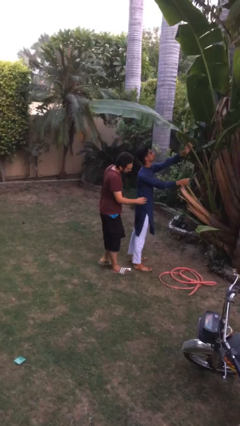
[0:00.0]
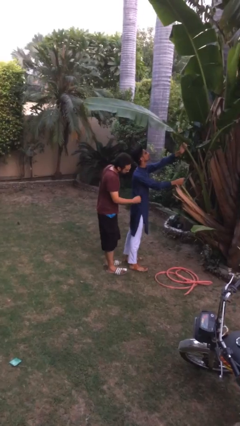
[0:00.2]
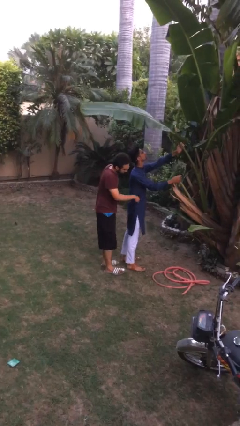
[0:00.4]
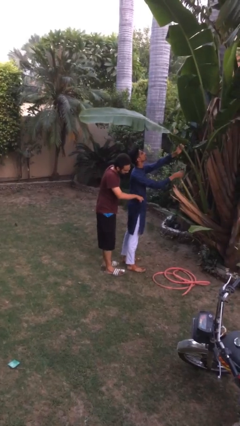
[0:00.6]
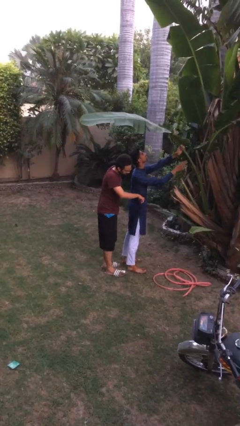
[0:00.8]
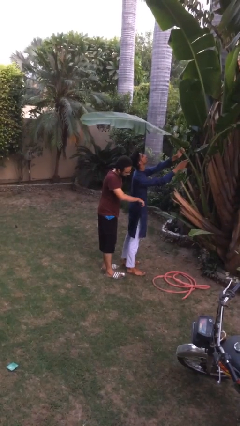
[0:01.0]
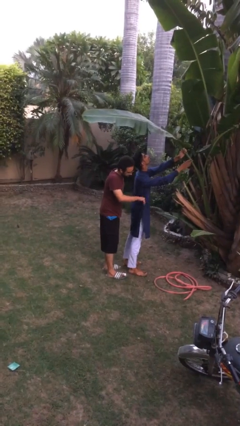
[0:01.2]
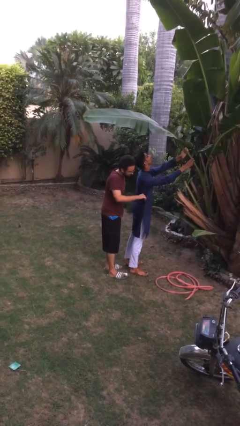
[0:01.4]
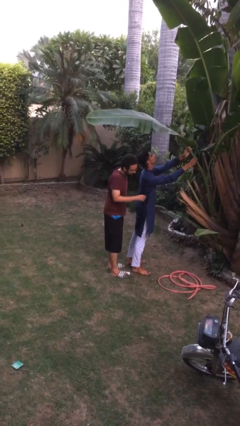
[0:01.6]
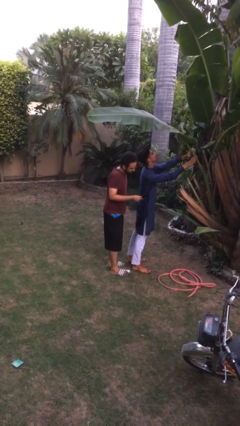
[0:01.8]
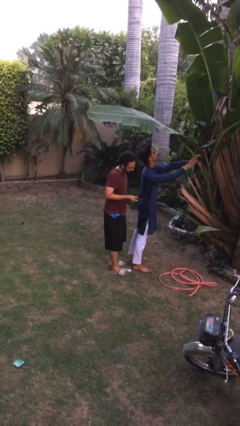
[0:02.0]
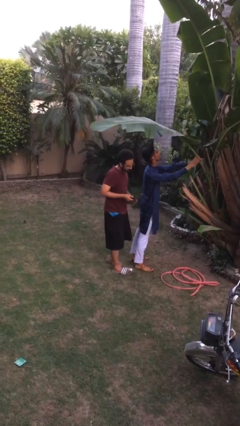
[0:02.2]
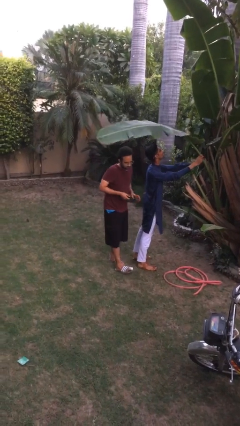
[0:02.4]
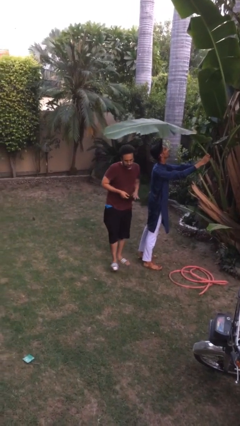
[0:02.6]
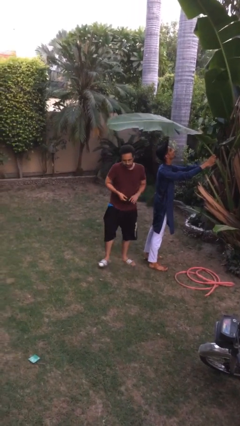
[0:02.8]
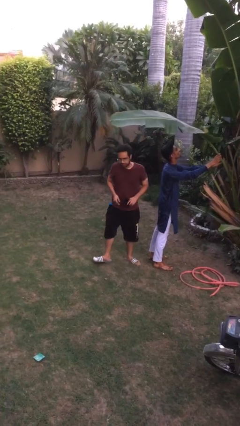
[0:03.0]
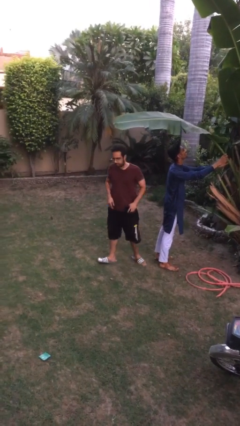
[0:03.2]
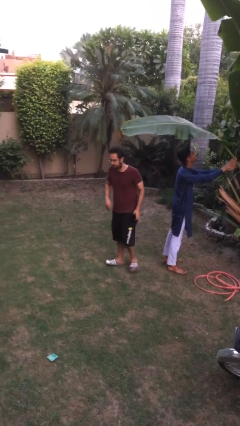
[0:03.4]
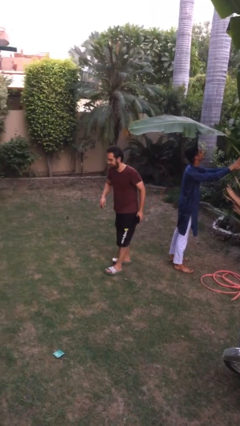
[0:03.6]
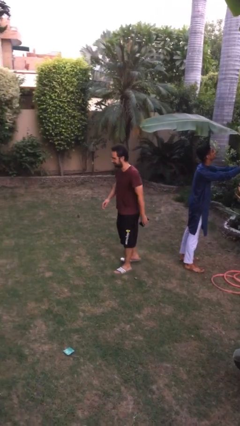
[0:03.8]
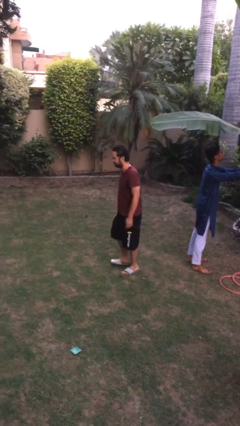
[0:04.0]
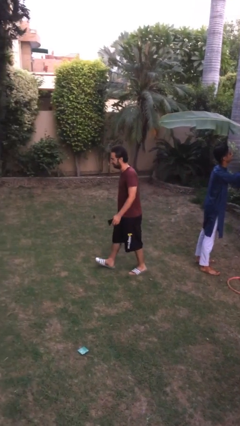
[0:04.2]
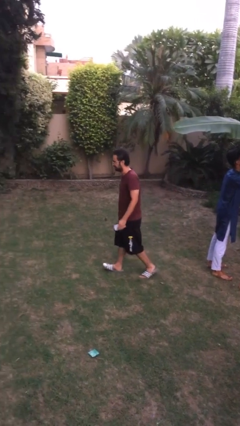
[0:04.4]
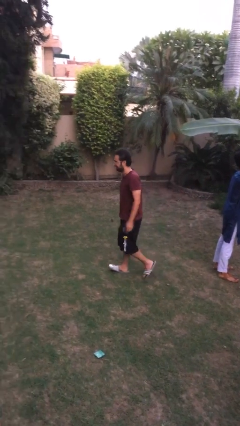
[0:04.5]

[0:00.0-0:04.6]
person steals object from person

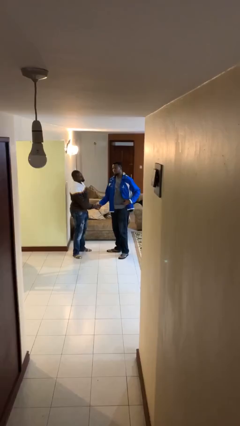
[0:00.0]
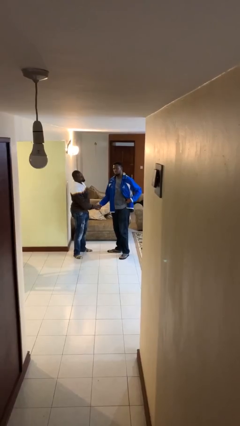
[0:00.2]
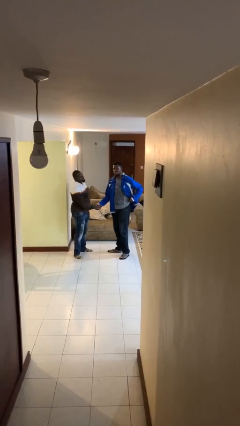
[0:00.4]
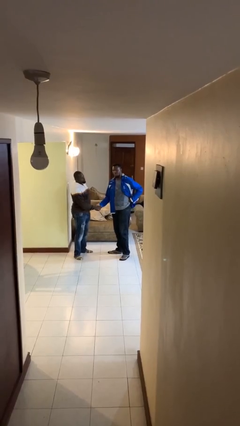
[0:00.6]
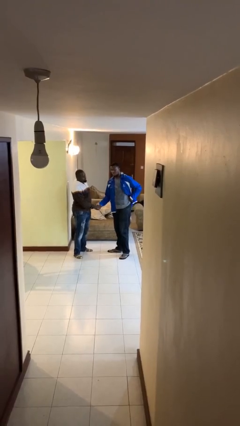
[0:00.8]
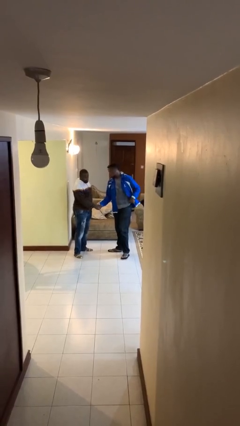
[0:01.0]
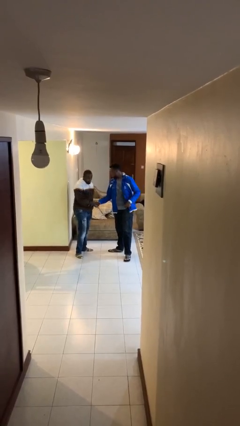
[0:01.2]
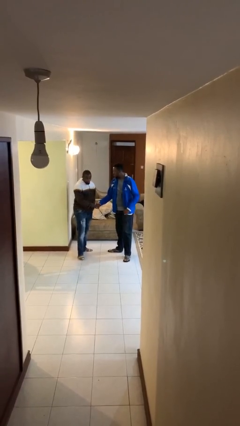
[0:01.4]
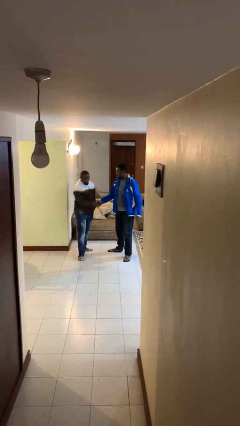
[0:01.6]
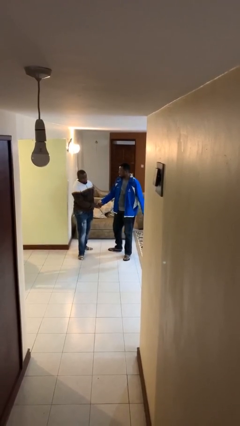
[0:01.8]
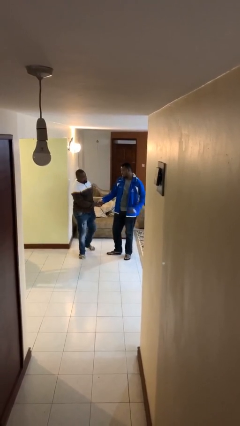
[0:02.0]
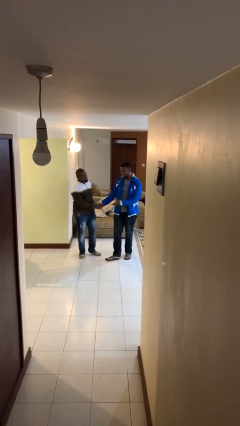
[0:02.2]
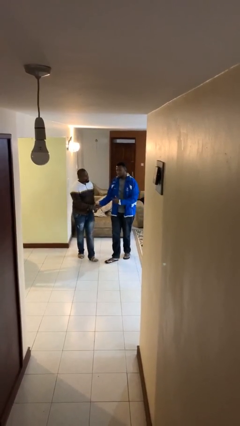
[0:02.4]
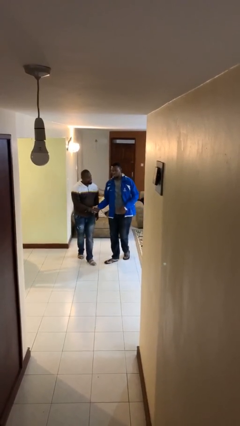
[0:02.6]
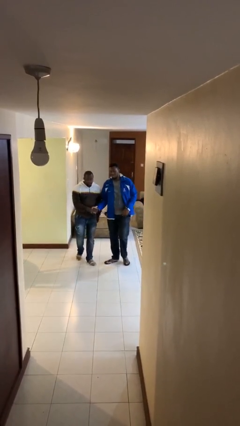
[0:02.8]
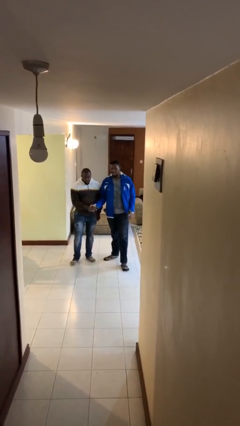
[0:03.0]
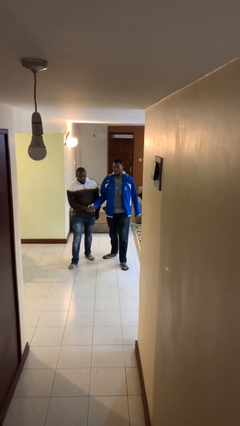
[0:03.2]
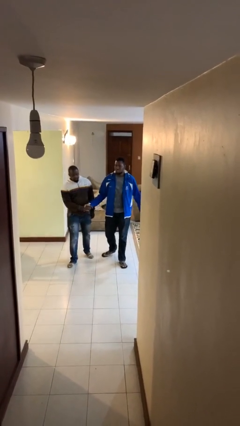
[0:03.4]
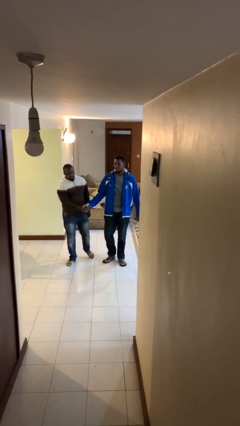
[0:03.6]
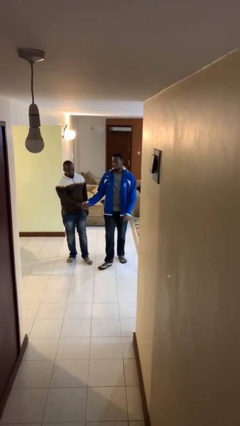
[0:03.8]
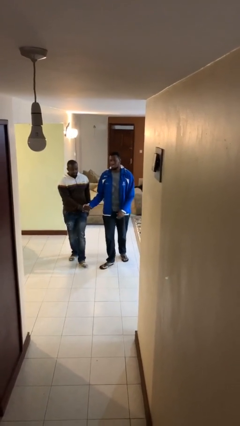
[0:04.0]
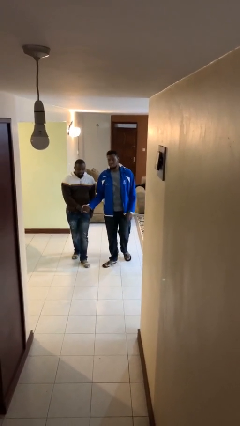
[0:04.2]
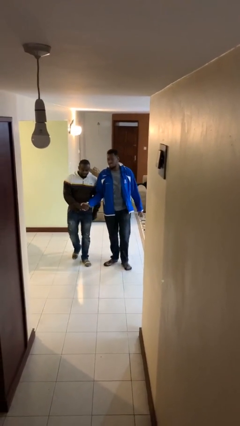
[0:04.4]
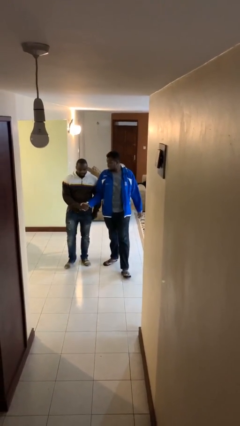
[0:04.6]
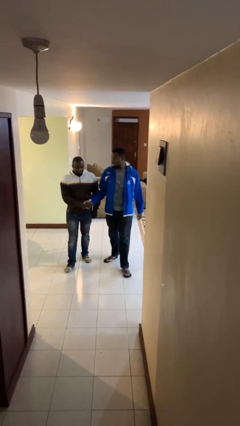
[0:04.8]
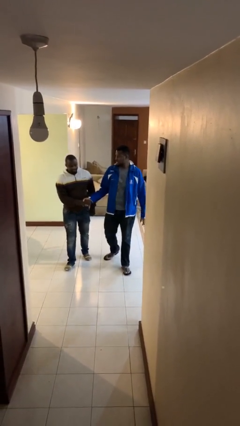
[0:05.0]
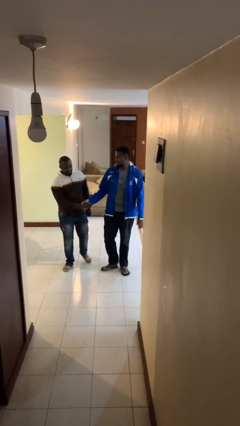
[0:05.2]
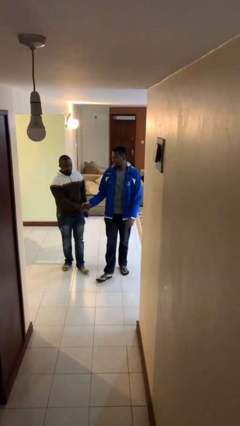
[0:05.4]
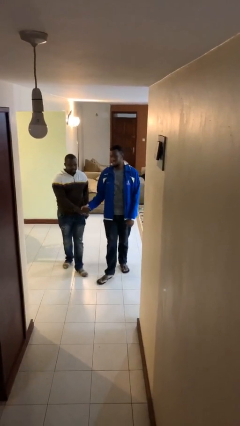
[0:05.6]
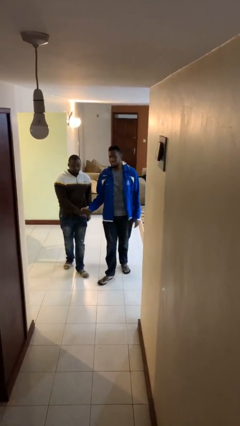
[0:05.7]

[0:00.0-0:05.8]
person holds hand

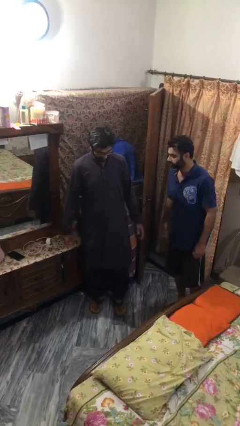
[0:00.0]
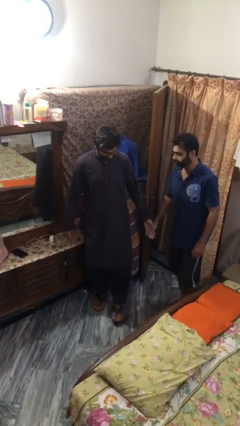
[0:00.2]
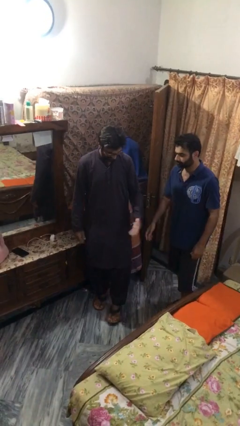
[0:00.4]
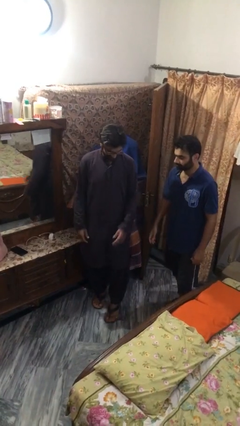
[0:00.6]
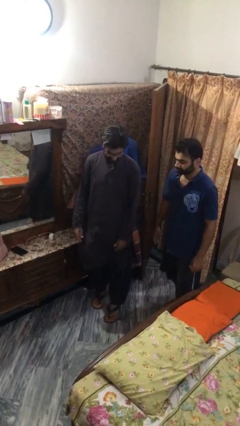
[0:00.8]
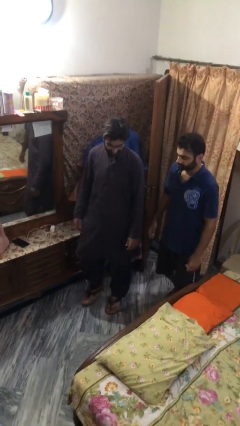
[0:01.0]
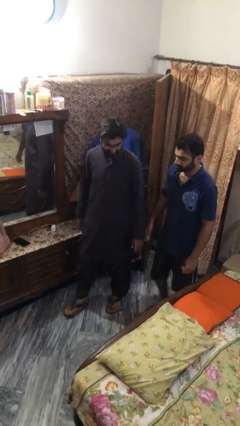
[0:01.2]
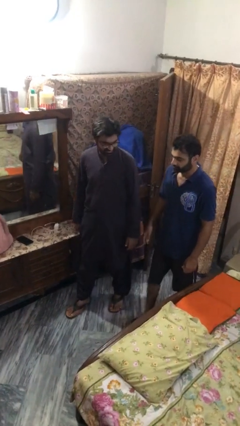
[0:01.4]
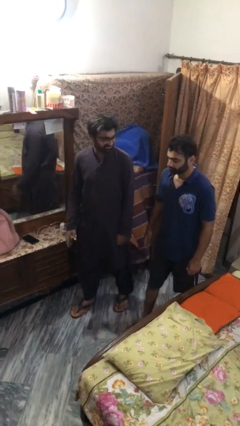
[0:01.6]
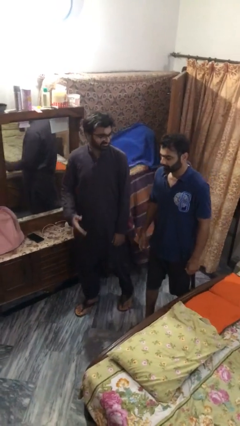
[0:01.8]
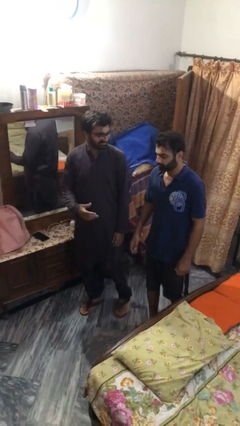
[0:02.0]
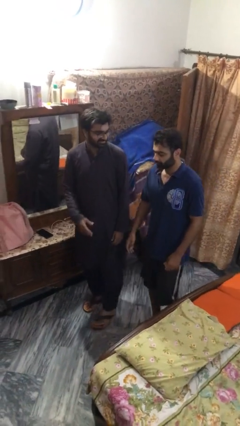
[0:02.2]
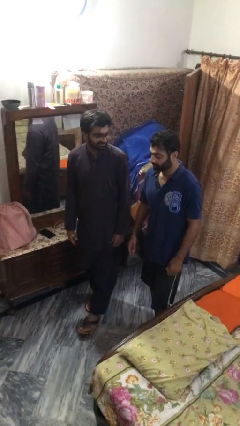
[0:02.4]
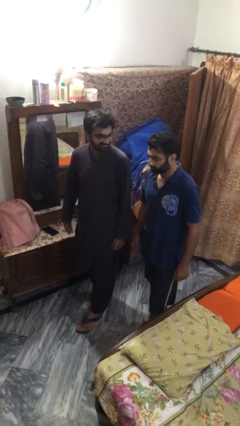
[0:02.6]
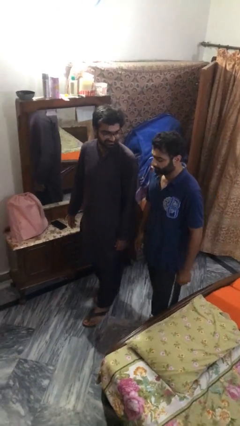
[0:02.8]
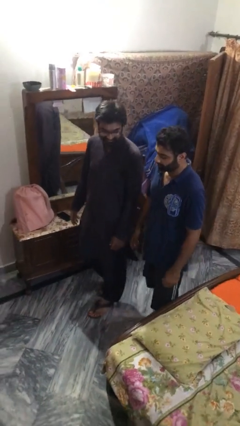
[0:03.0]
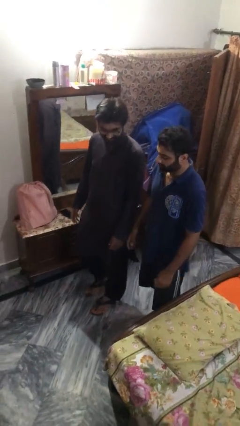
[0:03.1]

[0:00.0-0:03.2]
person talks to person

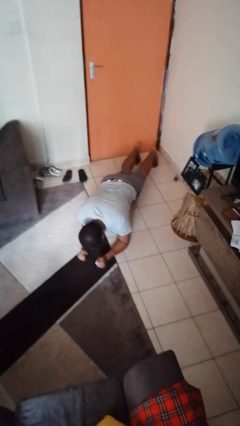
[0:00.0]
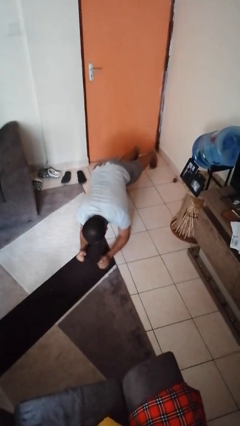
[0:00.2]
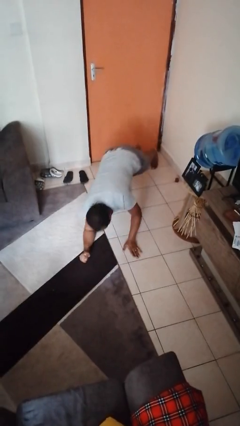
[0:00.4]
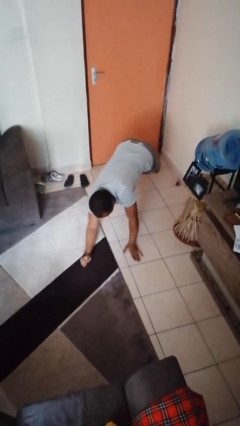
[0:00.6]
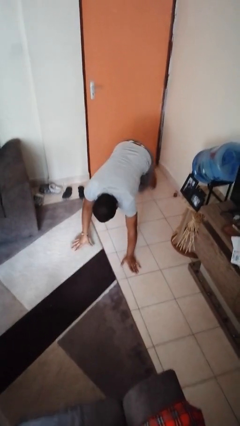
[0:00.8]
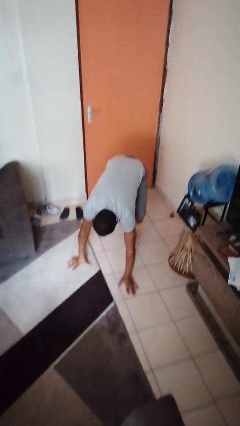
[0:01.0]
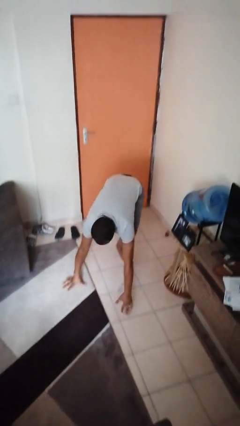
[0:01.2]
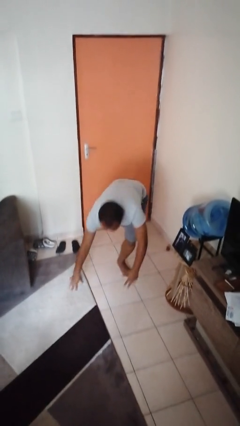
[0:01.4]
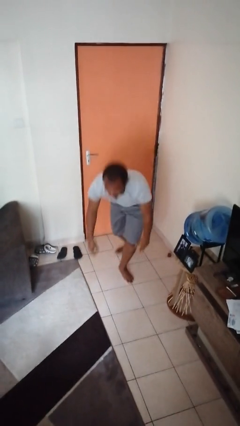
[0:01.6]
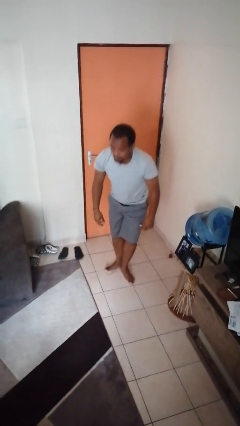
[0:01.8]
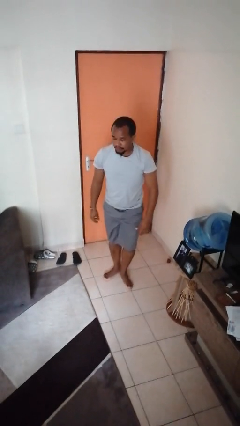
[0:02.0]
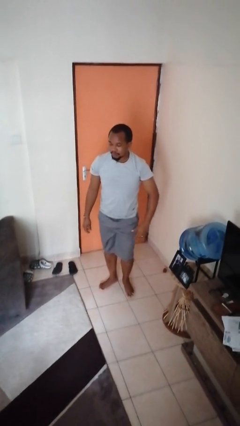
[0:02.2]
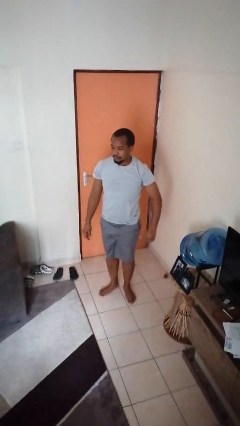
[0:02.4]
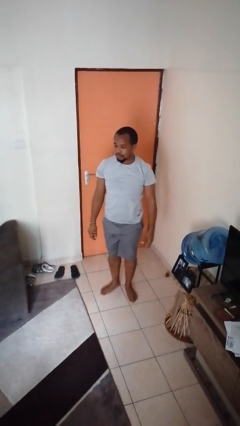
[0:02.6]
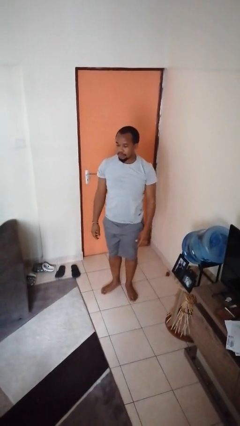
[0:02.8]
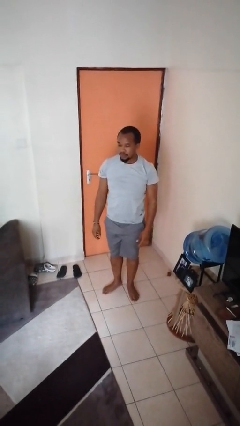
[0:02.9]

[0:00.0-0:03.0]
person stands up from floor

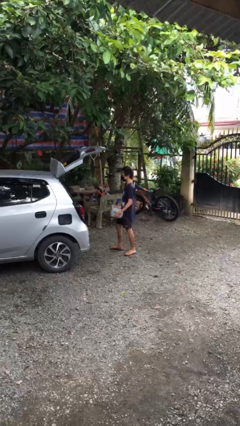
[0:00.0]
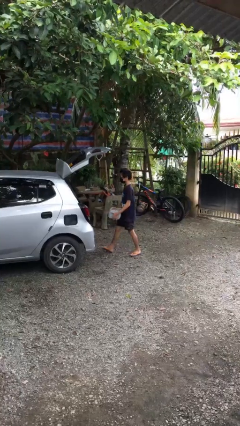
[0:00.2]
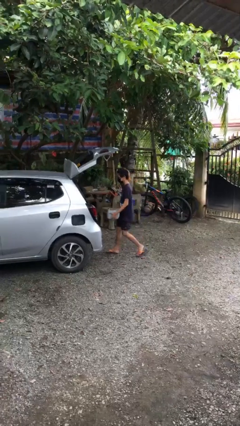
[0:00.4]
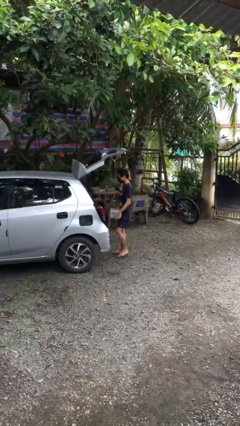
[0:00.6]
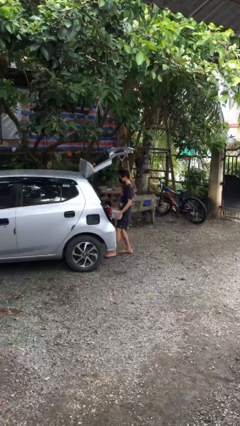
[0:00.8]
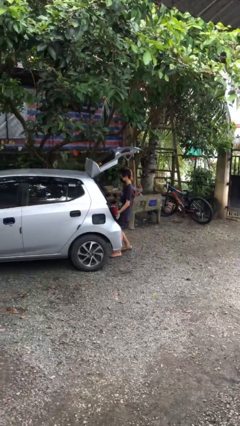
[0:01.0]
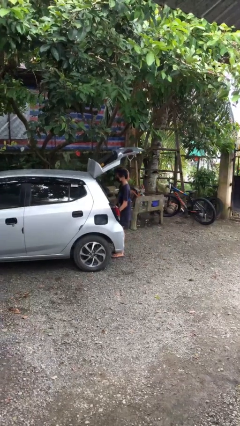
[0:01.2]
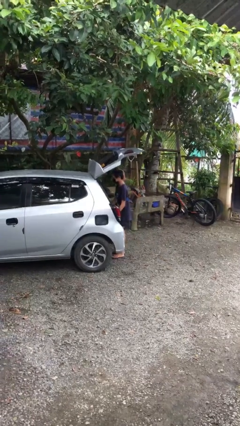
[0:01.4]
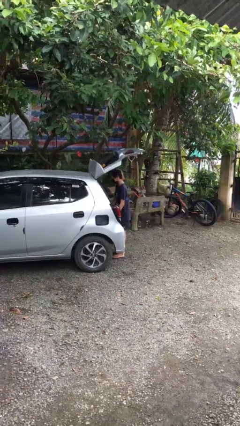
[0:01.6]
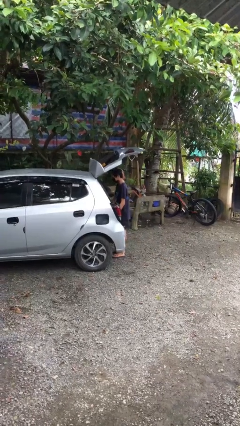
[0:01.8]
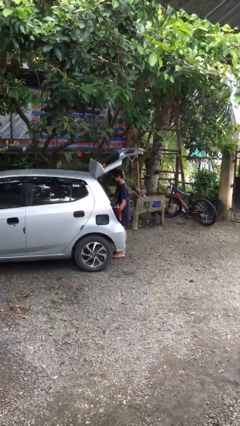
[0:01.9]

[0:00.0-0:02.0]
person loads car
